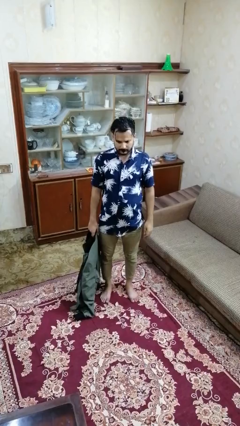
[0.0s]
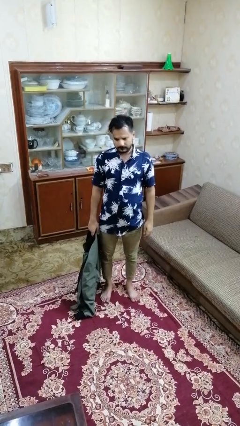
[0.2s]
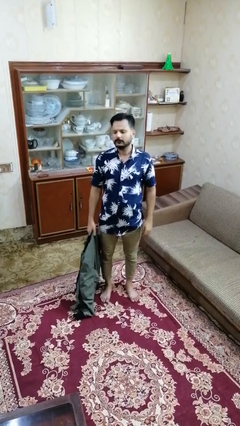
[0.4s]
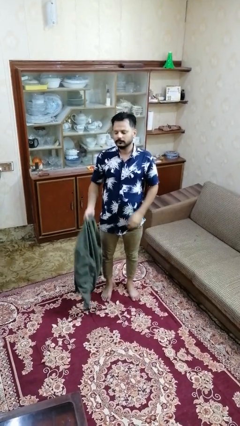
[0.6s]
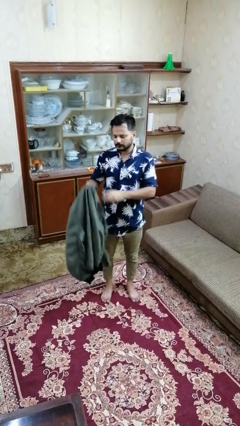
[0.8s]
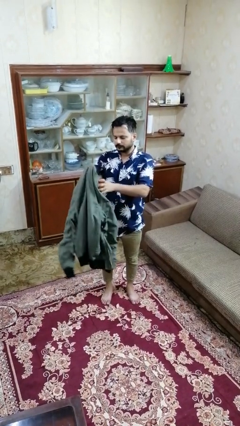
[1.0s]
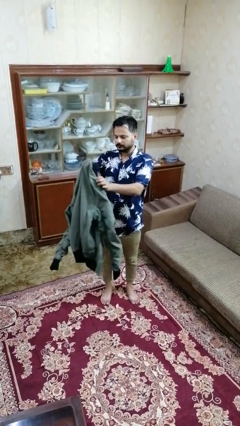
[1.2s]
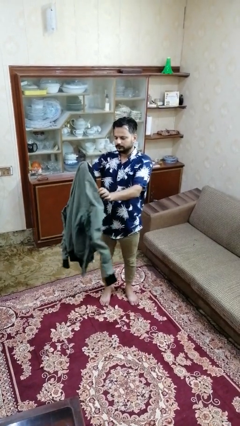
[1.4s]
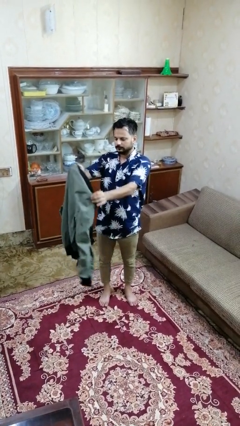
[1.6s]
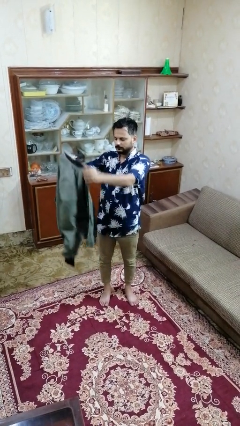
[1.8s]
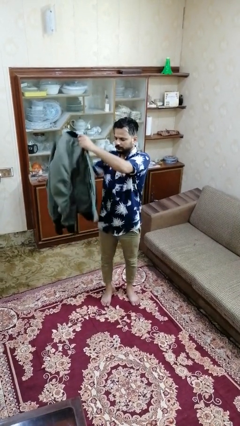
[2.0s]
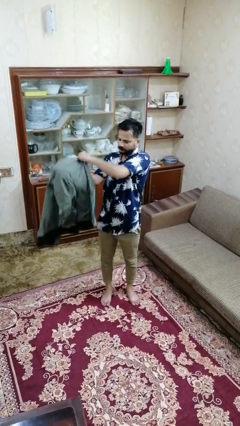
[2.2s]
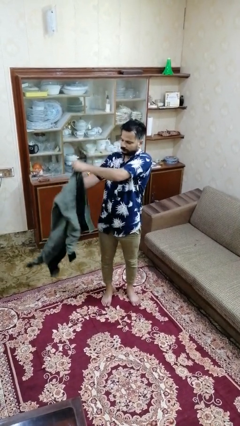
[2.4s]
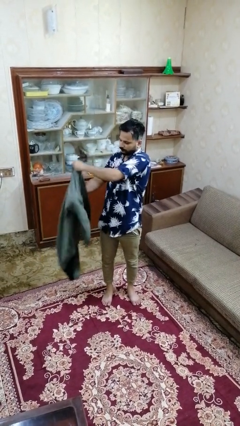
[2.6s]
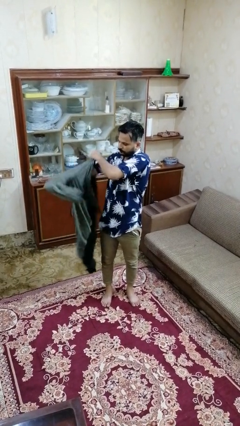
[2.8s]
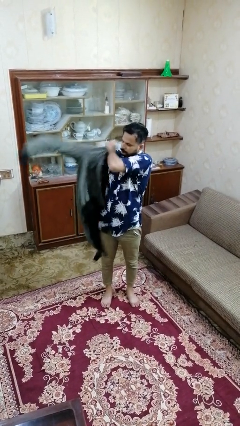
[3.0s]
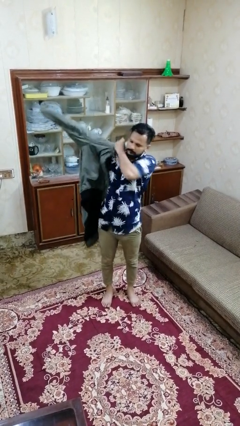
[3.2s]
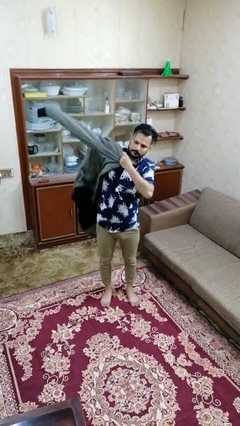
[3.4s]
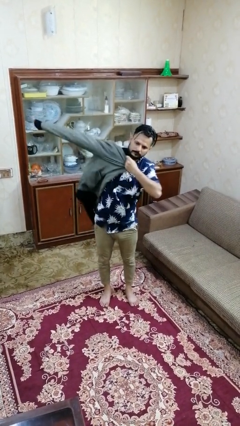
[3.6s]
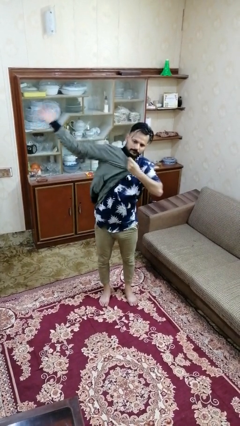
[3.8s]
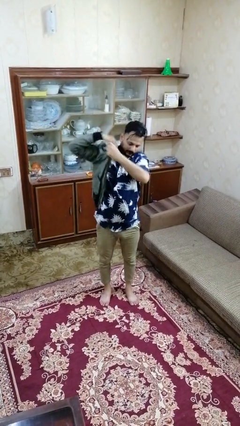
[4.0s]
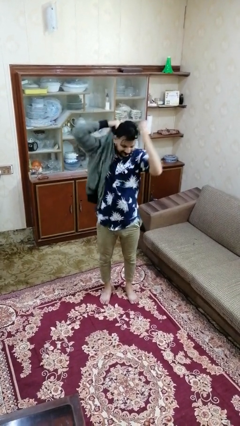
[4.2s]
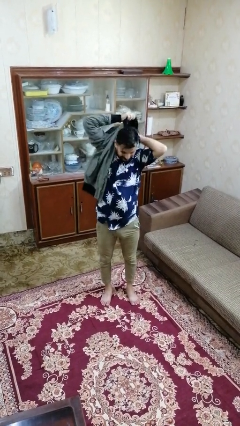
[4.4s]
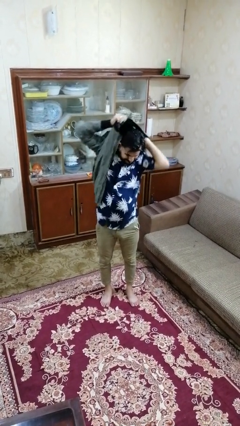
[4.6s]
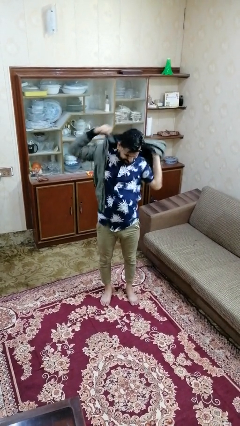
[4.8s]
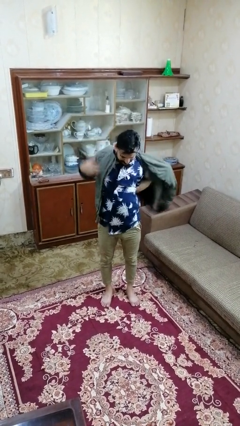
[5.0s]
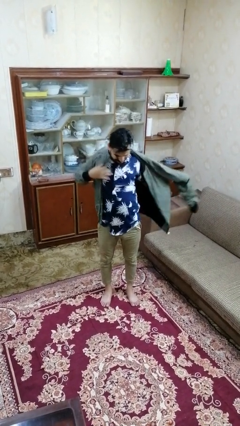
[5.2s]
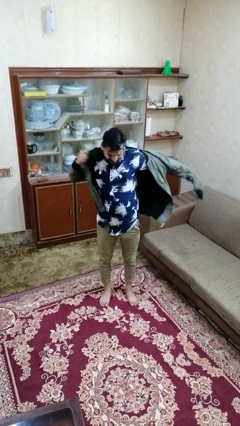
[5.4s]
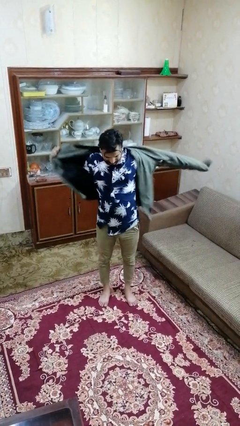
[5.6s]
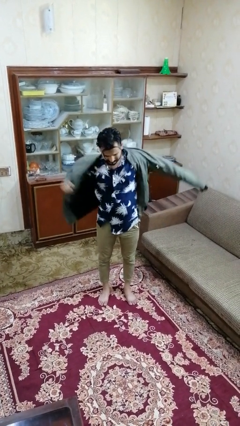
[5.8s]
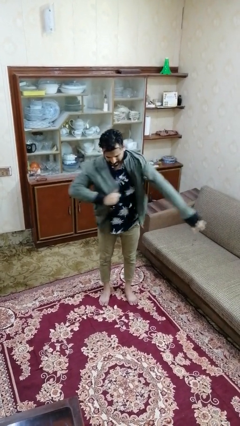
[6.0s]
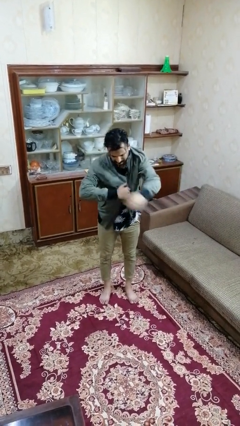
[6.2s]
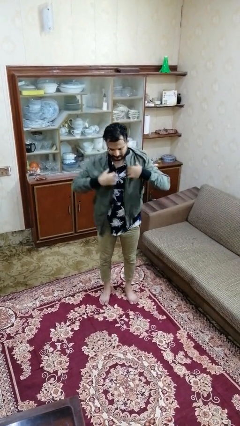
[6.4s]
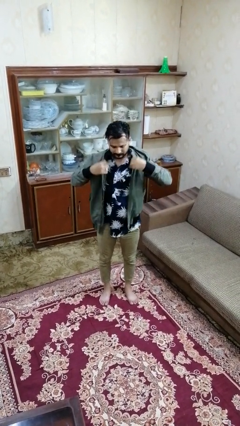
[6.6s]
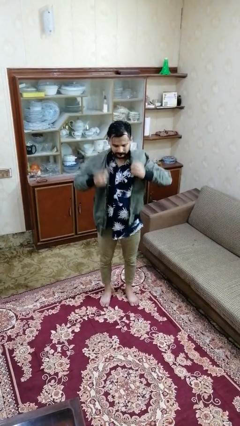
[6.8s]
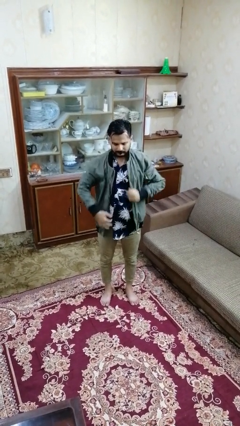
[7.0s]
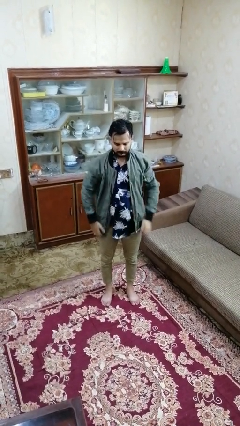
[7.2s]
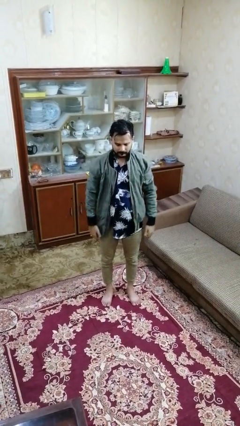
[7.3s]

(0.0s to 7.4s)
person puts on jacket

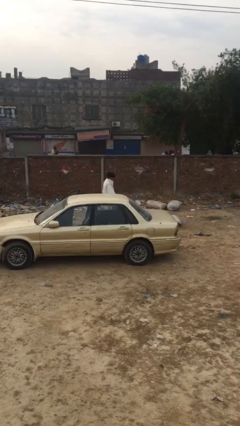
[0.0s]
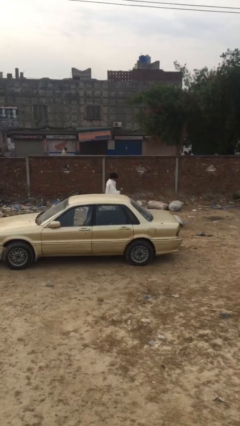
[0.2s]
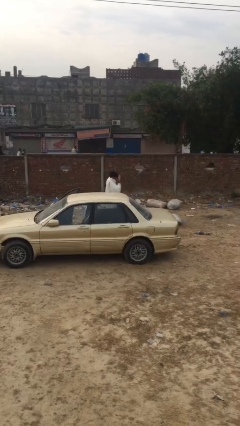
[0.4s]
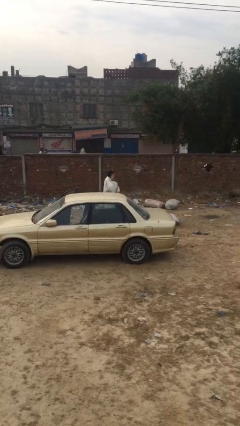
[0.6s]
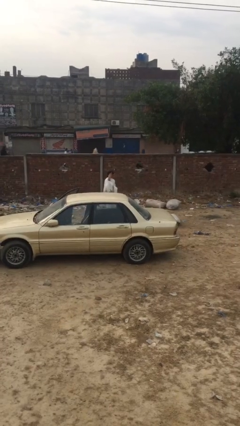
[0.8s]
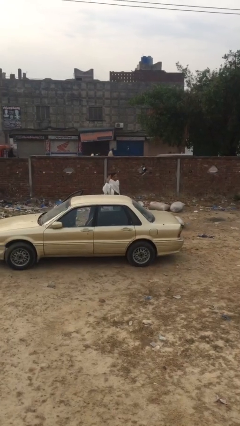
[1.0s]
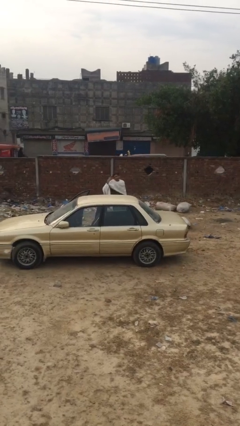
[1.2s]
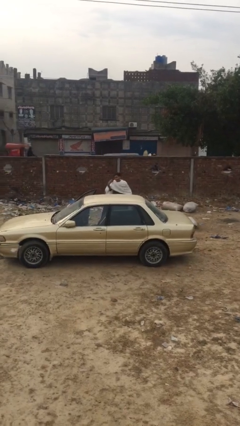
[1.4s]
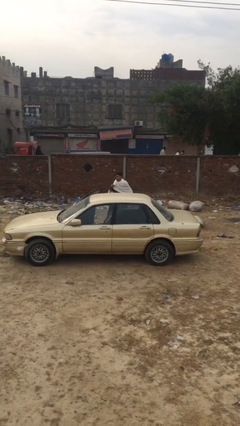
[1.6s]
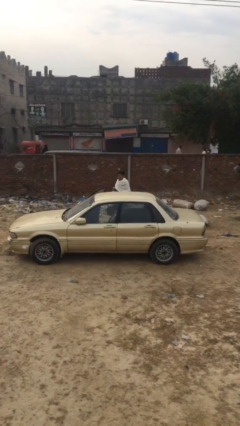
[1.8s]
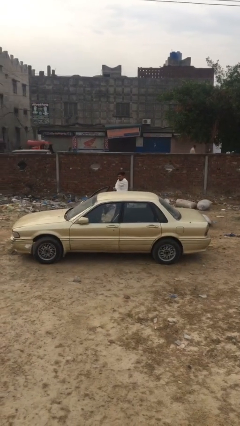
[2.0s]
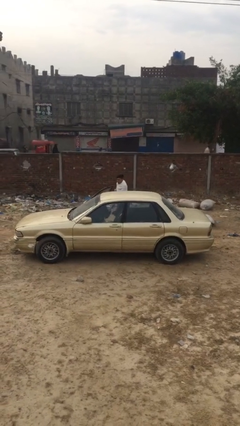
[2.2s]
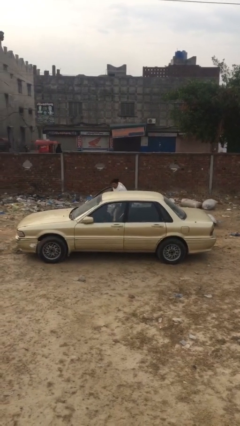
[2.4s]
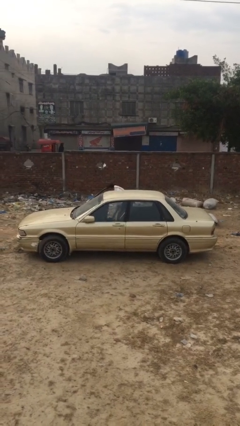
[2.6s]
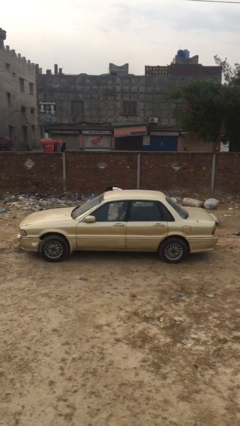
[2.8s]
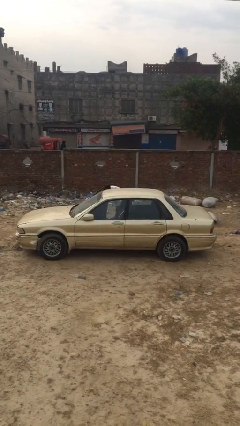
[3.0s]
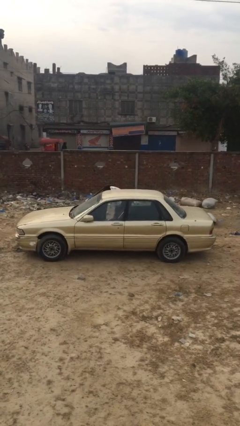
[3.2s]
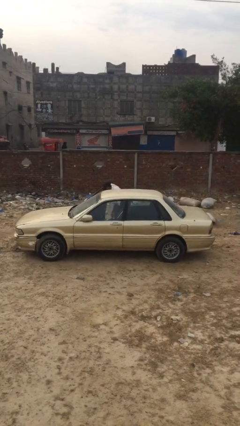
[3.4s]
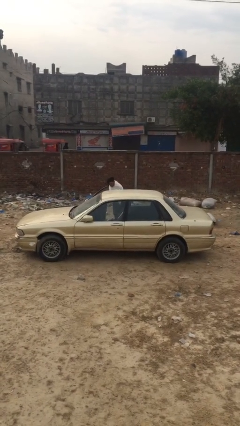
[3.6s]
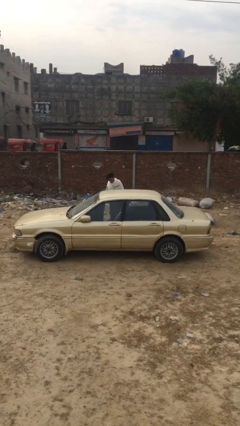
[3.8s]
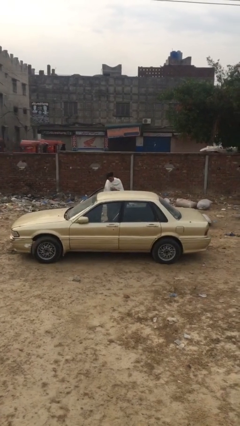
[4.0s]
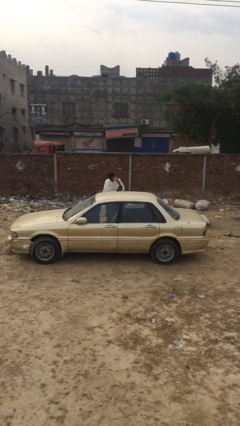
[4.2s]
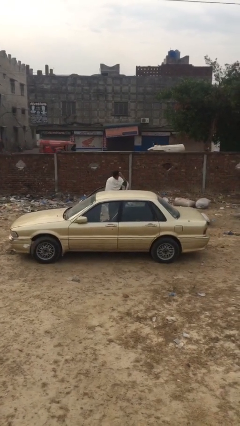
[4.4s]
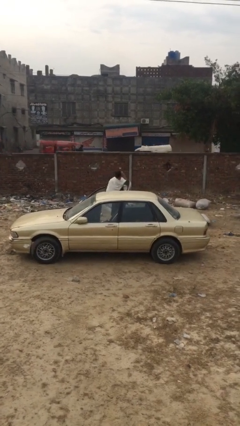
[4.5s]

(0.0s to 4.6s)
person loads car

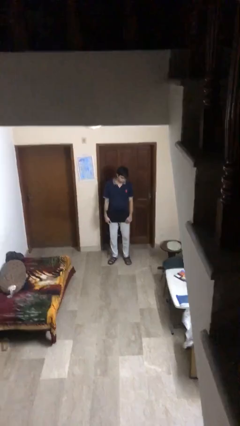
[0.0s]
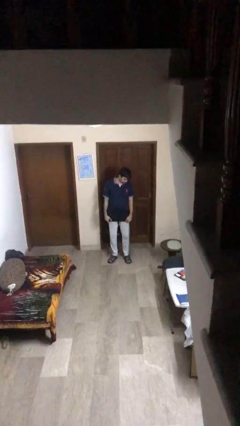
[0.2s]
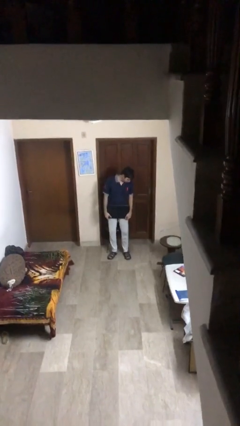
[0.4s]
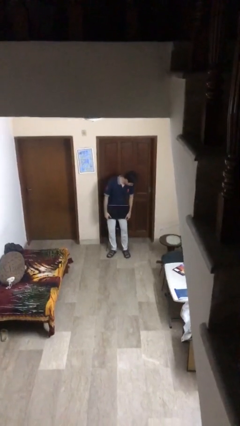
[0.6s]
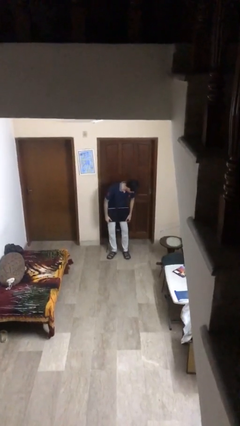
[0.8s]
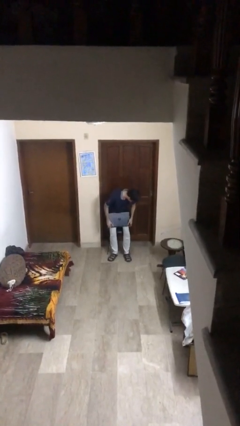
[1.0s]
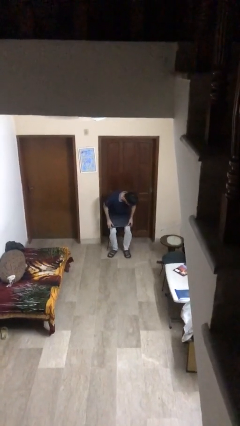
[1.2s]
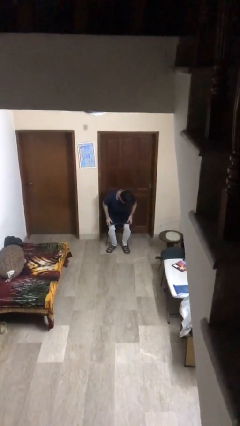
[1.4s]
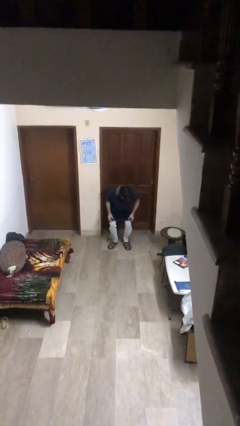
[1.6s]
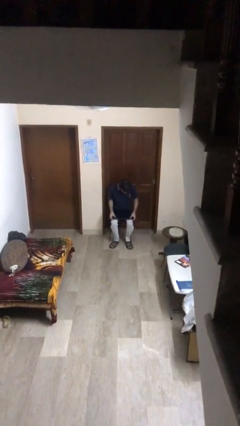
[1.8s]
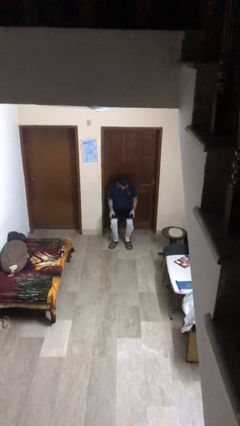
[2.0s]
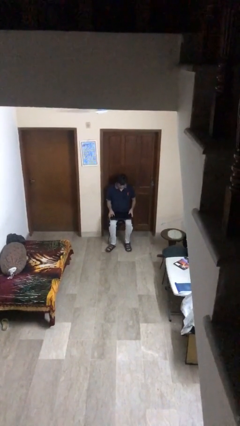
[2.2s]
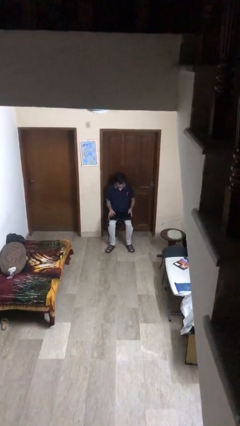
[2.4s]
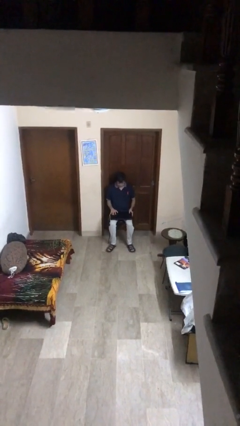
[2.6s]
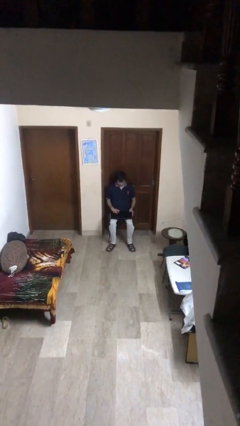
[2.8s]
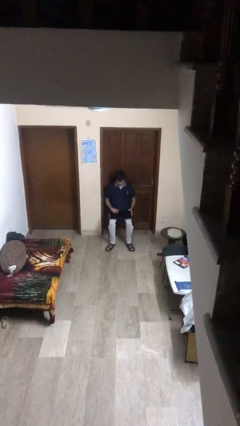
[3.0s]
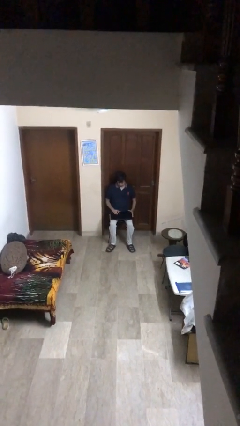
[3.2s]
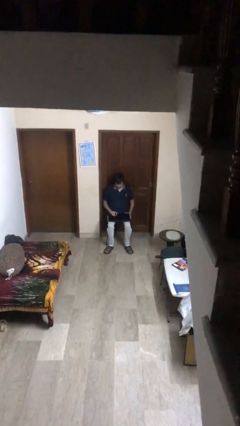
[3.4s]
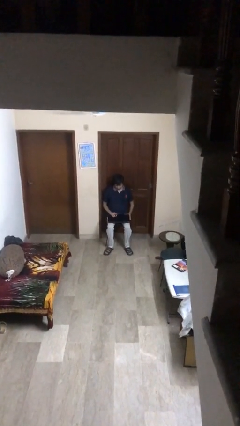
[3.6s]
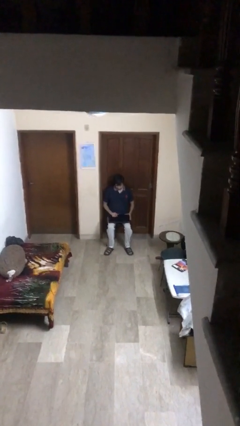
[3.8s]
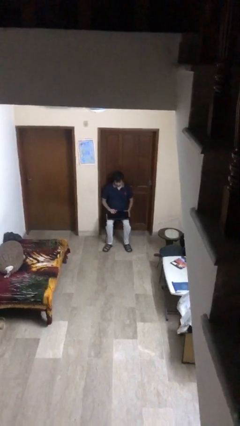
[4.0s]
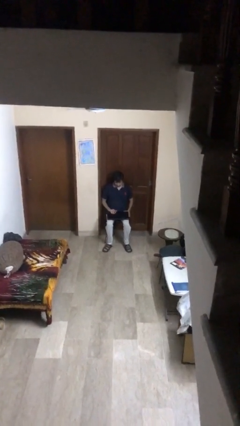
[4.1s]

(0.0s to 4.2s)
person sits down

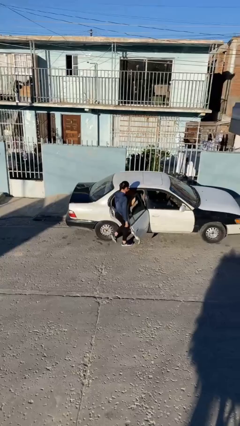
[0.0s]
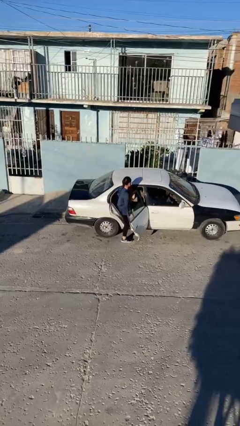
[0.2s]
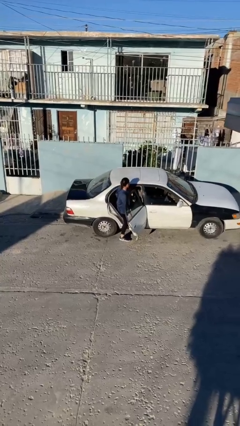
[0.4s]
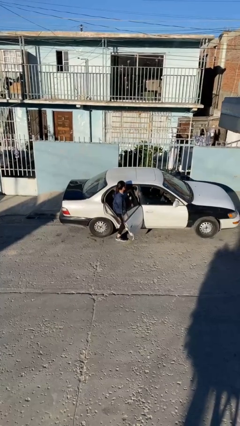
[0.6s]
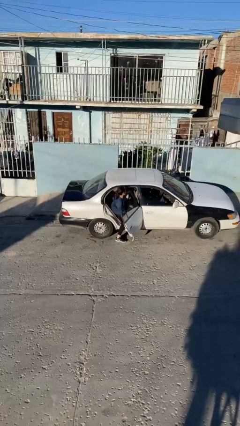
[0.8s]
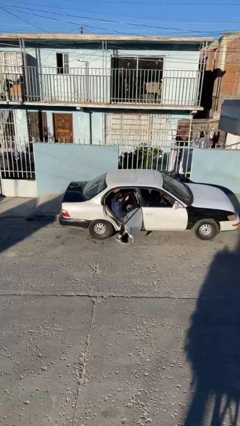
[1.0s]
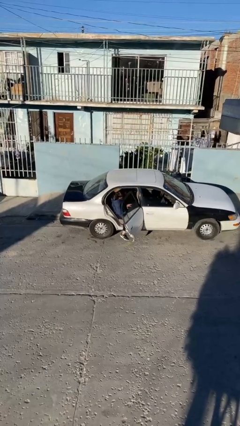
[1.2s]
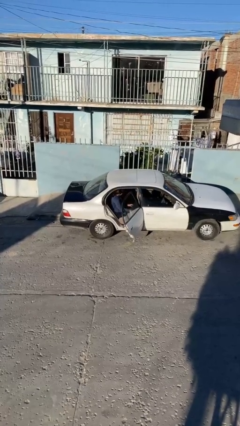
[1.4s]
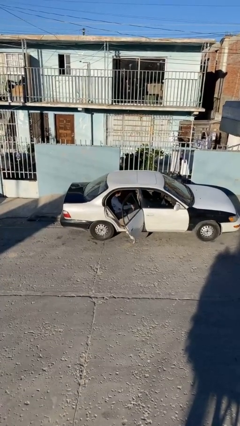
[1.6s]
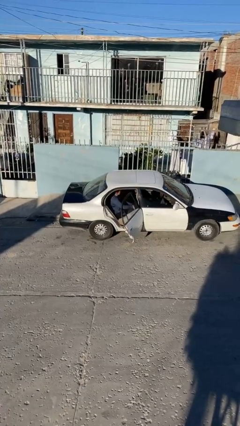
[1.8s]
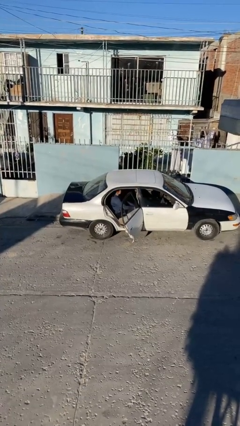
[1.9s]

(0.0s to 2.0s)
person enters car
